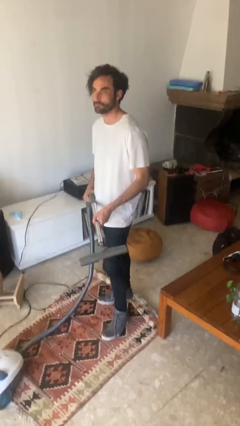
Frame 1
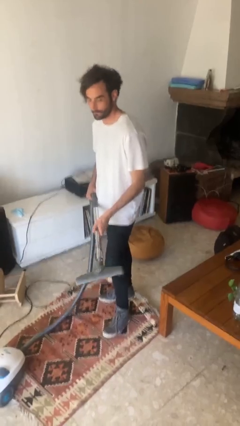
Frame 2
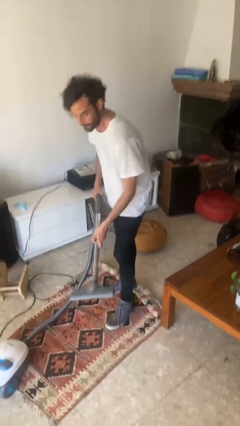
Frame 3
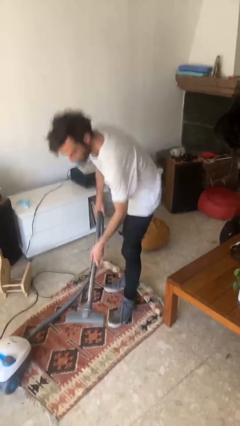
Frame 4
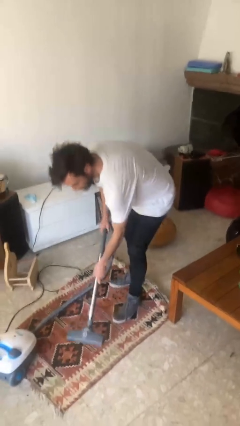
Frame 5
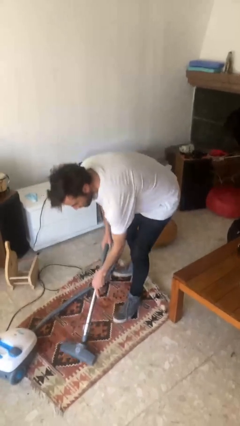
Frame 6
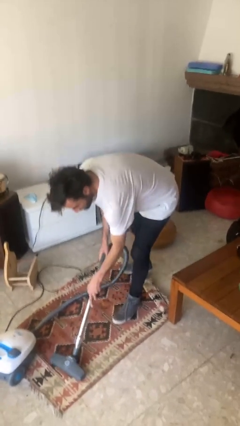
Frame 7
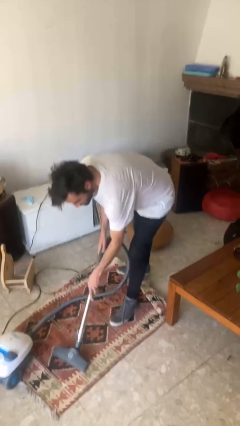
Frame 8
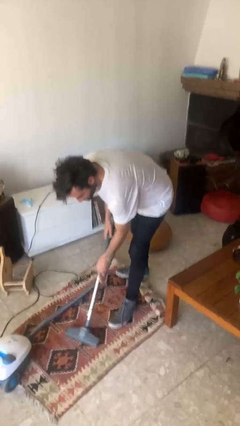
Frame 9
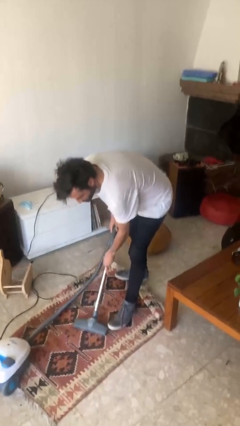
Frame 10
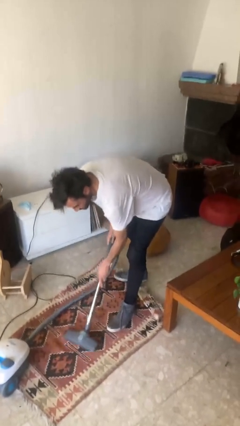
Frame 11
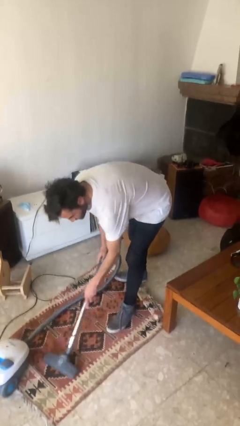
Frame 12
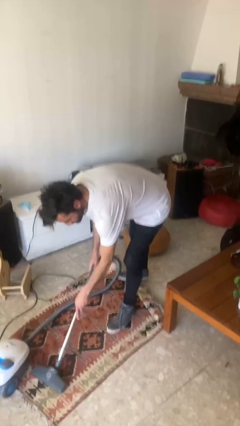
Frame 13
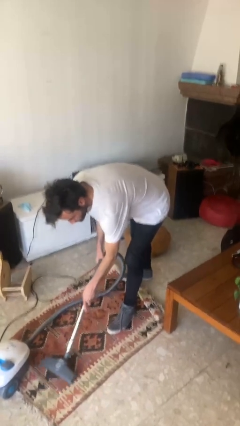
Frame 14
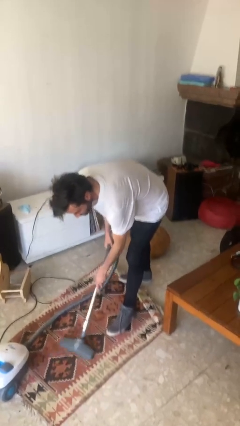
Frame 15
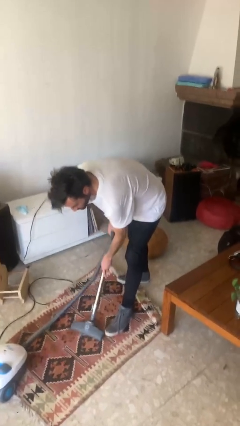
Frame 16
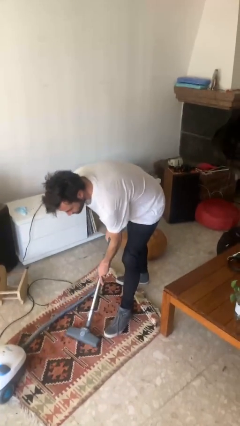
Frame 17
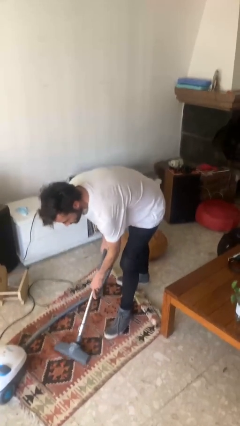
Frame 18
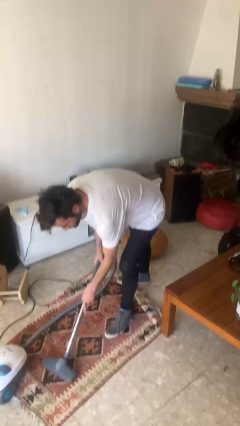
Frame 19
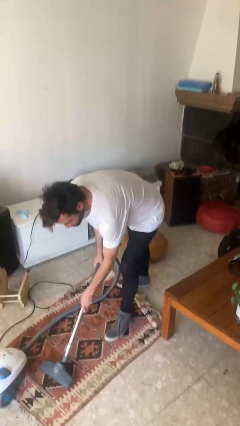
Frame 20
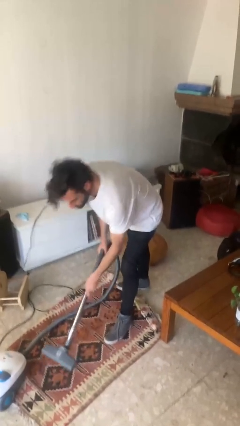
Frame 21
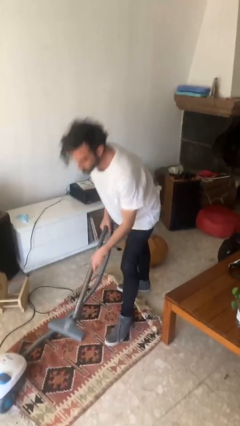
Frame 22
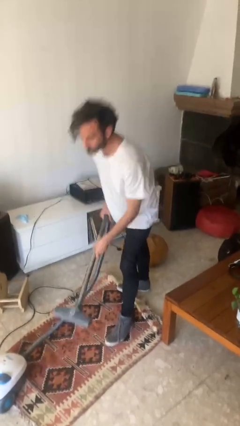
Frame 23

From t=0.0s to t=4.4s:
person vacuums carpet

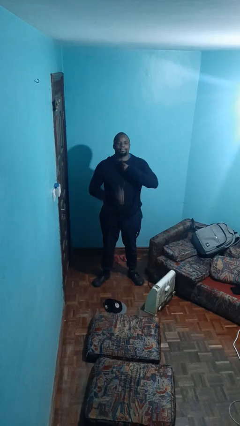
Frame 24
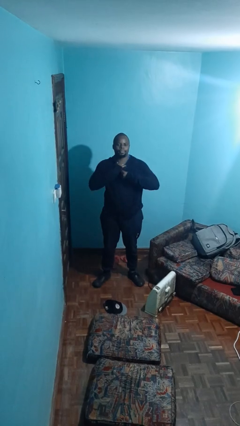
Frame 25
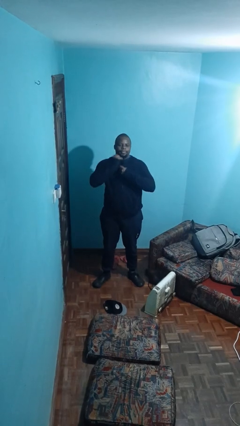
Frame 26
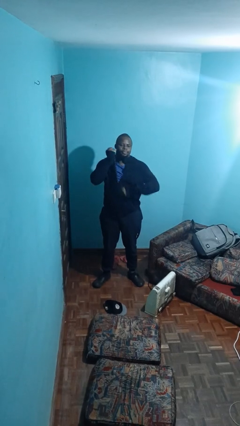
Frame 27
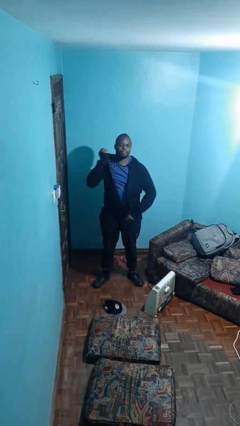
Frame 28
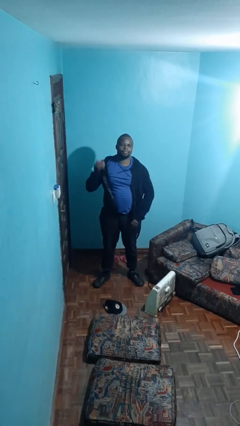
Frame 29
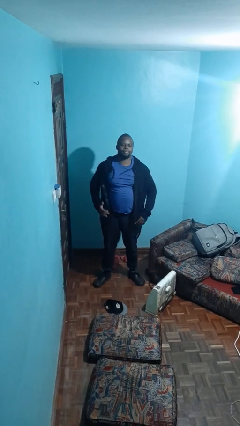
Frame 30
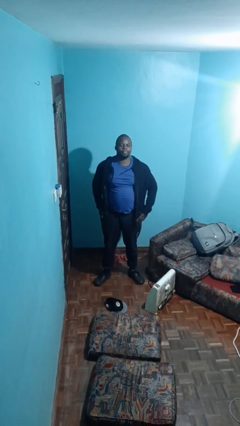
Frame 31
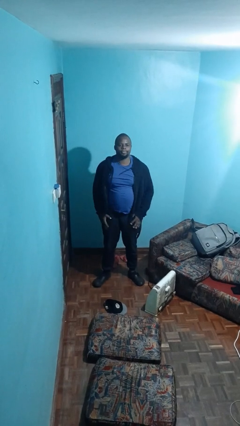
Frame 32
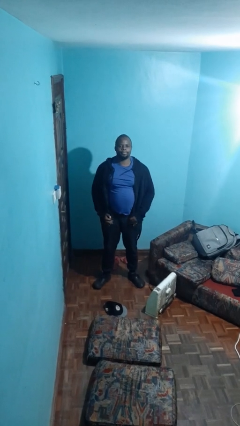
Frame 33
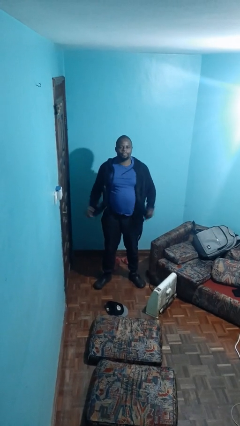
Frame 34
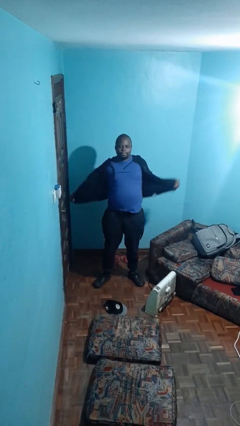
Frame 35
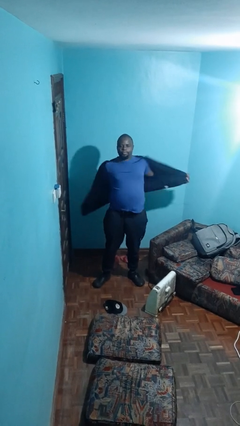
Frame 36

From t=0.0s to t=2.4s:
person unzips jacket

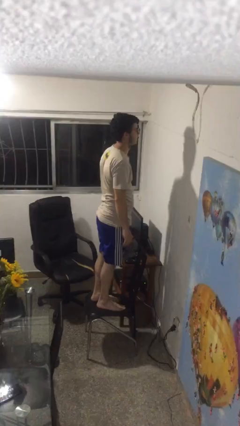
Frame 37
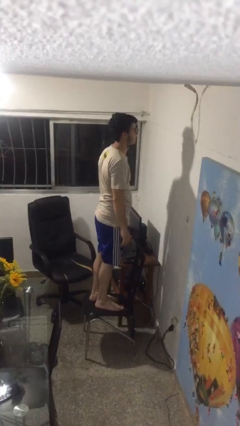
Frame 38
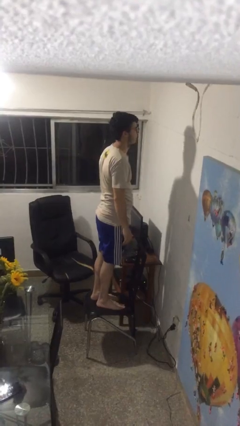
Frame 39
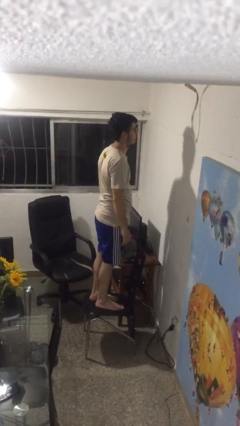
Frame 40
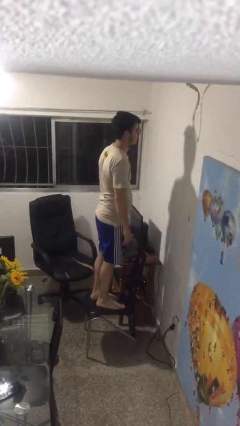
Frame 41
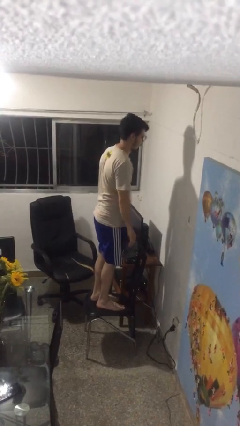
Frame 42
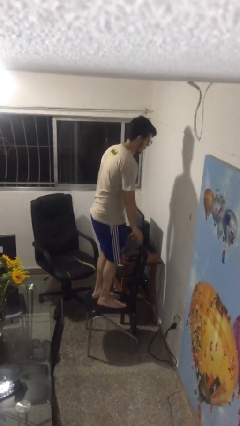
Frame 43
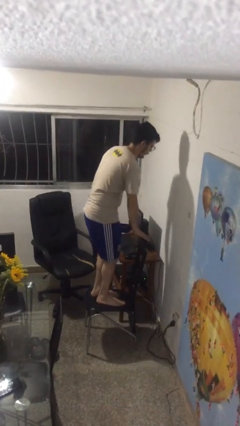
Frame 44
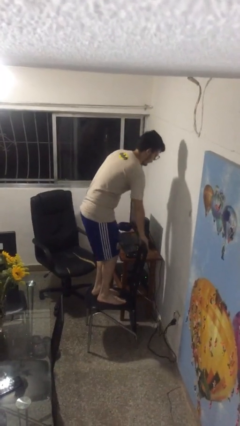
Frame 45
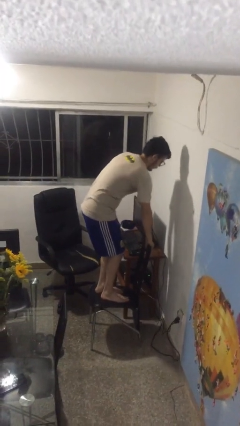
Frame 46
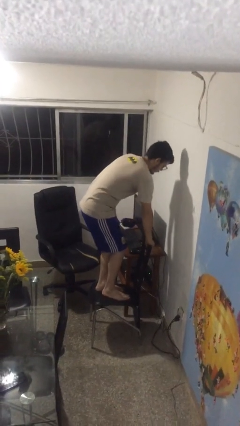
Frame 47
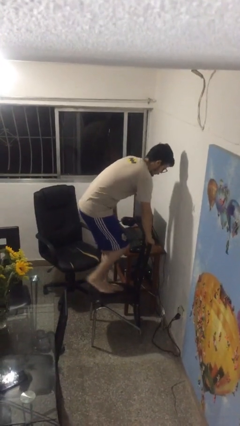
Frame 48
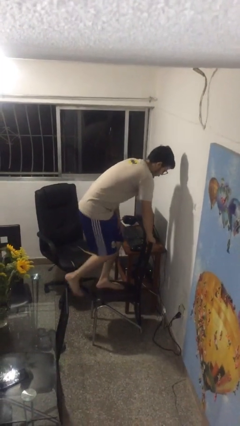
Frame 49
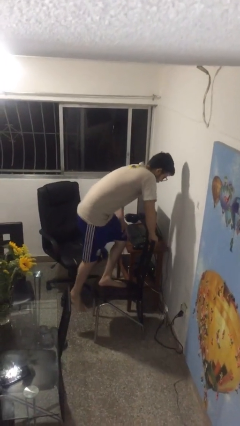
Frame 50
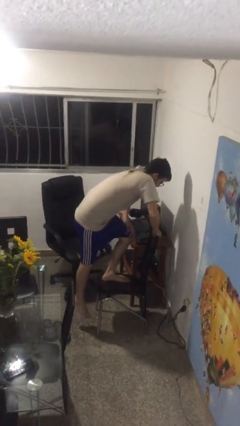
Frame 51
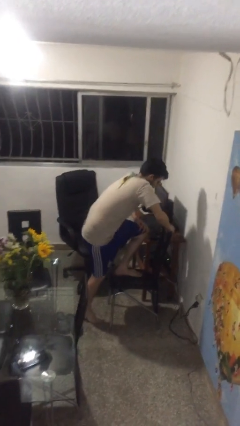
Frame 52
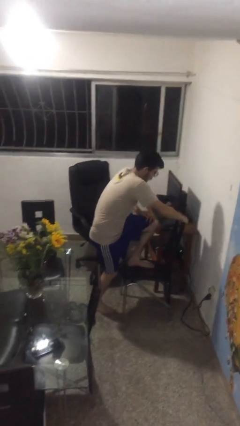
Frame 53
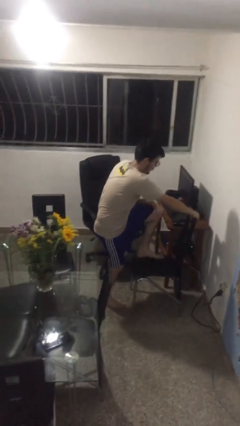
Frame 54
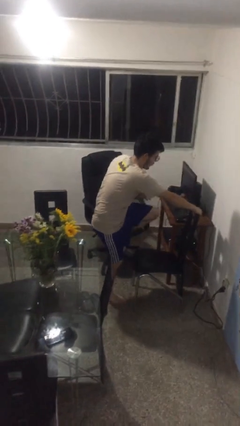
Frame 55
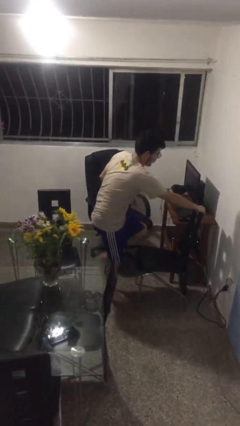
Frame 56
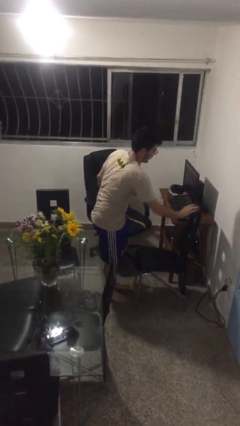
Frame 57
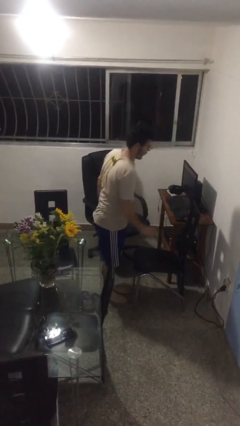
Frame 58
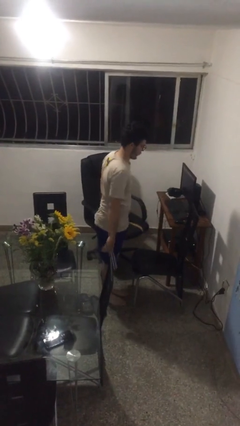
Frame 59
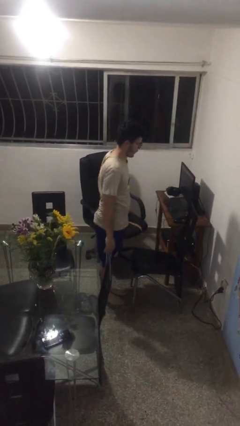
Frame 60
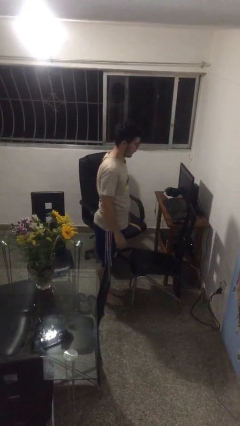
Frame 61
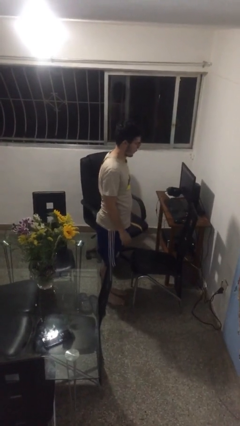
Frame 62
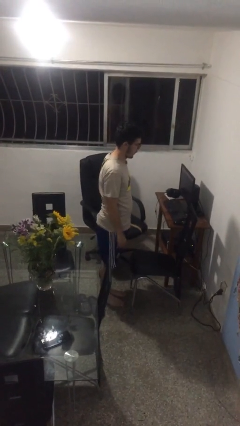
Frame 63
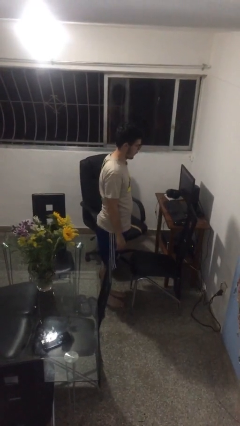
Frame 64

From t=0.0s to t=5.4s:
person climbs off chair

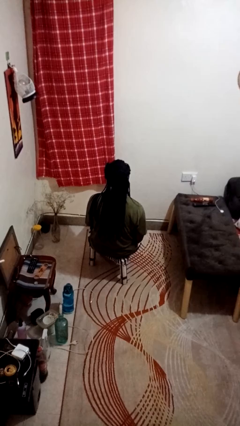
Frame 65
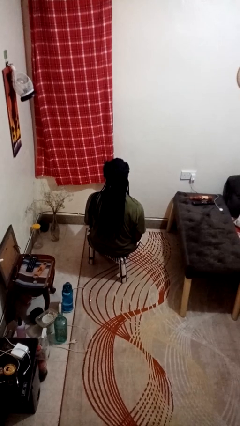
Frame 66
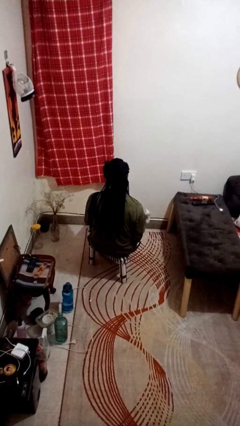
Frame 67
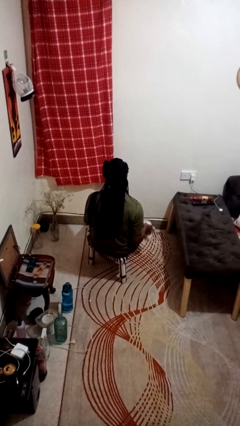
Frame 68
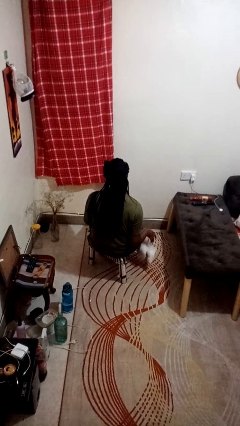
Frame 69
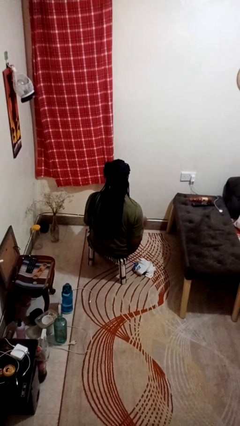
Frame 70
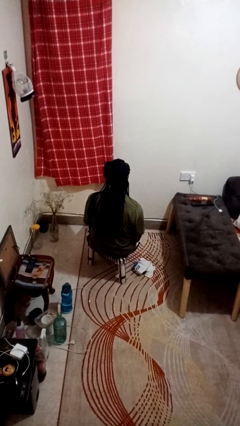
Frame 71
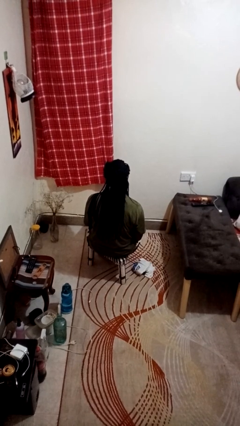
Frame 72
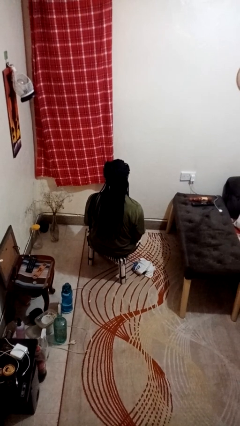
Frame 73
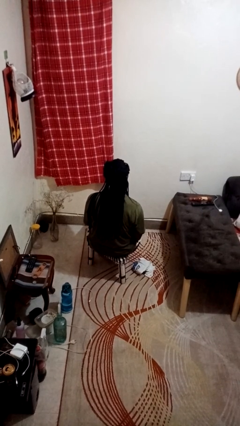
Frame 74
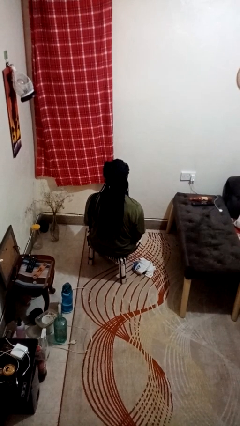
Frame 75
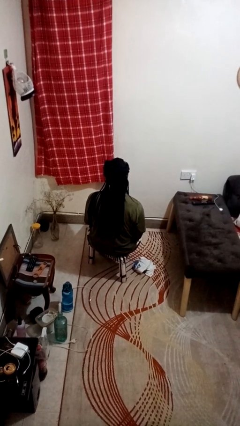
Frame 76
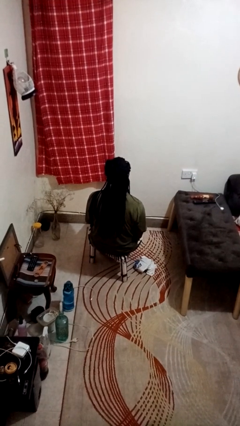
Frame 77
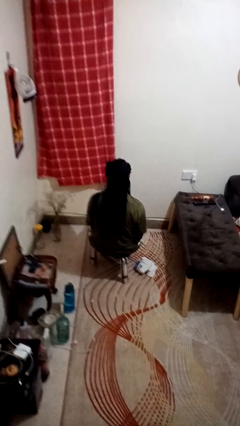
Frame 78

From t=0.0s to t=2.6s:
person throws object to ground

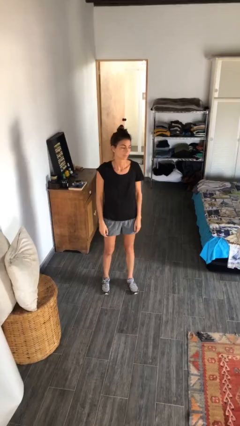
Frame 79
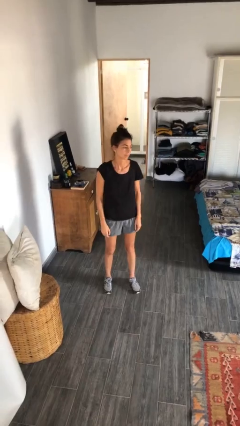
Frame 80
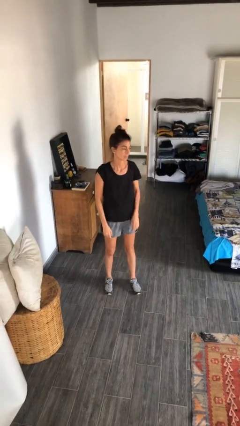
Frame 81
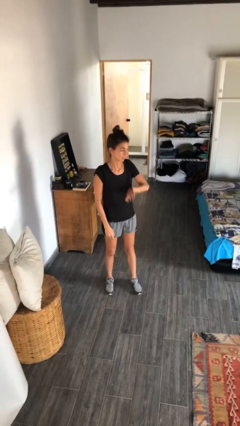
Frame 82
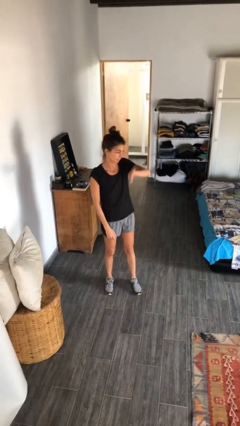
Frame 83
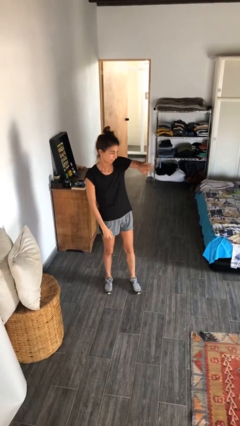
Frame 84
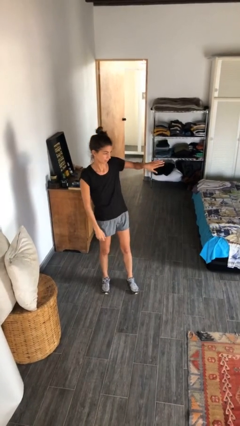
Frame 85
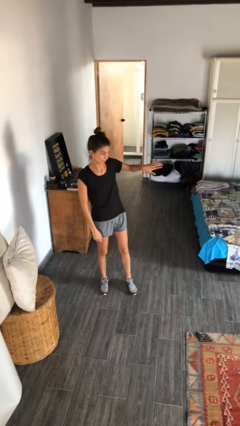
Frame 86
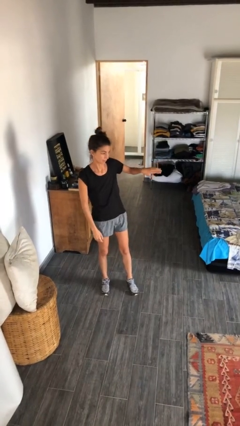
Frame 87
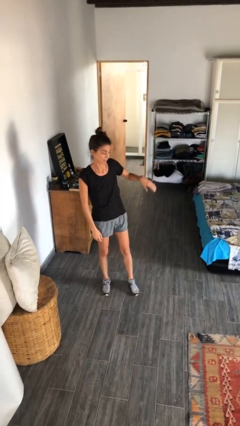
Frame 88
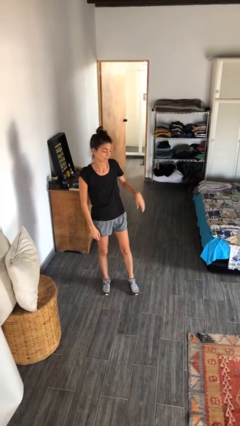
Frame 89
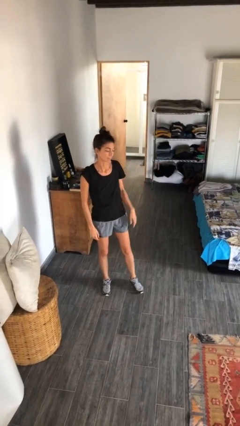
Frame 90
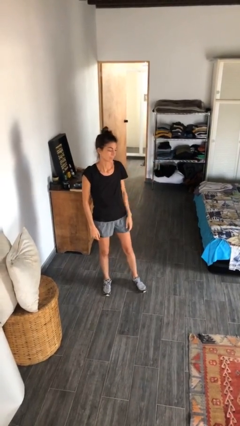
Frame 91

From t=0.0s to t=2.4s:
person gestures swipe left

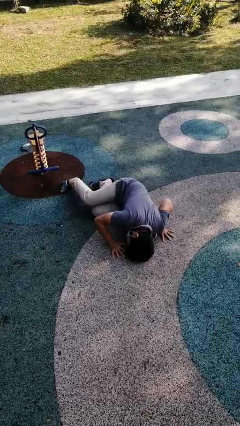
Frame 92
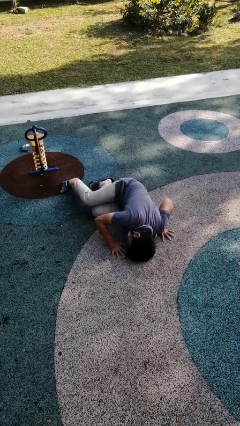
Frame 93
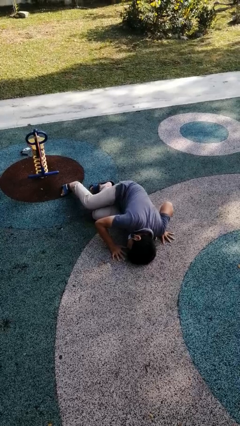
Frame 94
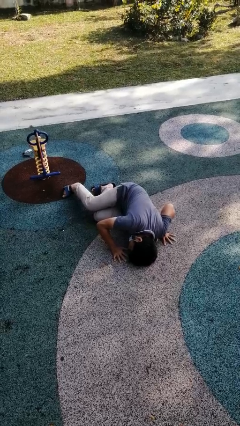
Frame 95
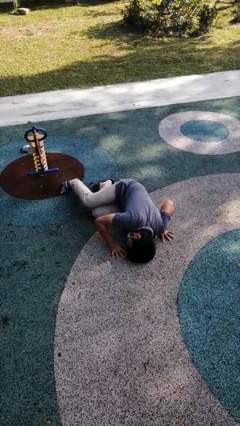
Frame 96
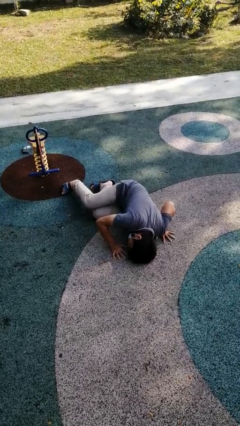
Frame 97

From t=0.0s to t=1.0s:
person lies down on floor
